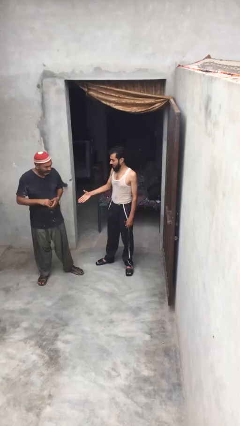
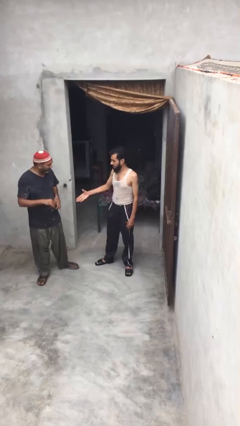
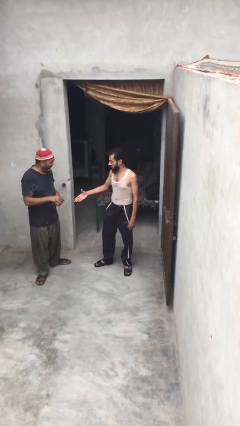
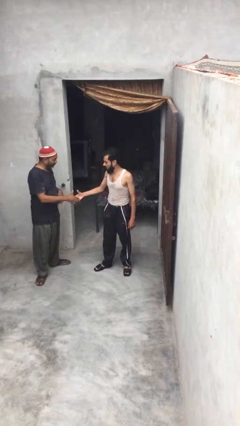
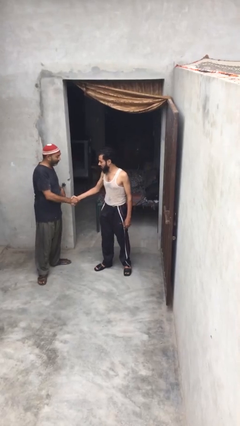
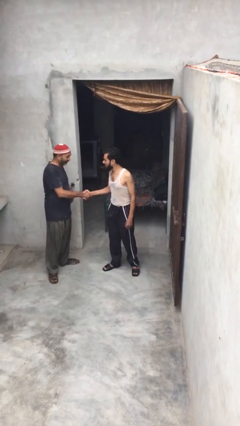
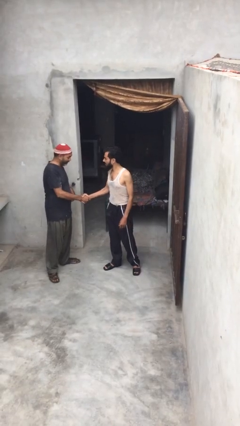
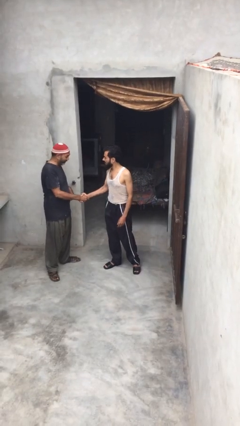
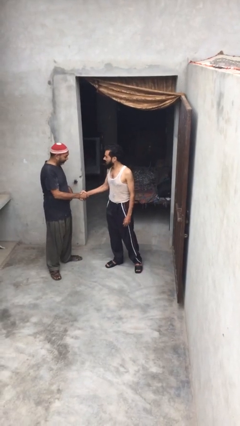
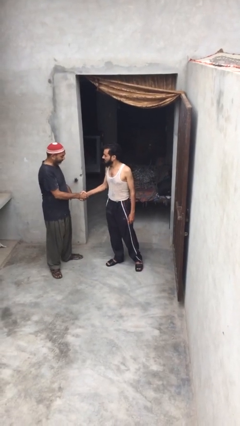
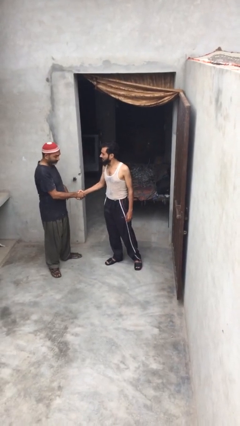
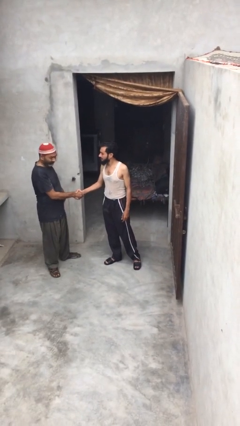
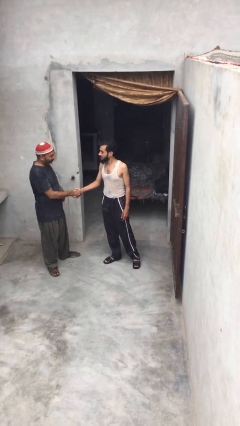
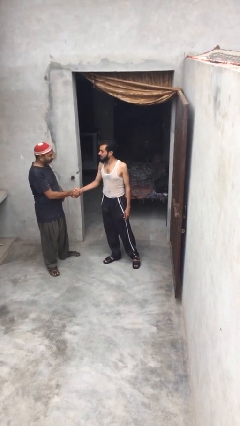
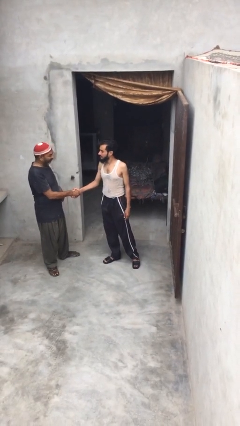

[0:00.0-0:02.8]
person shakes hand

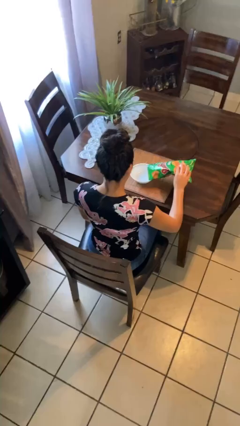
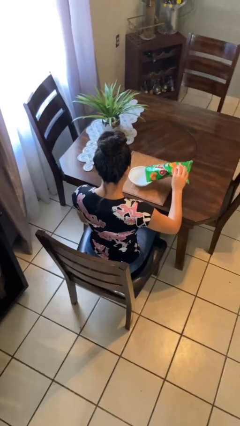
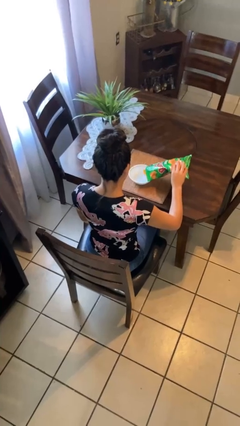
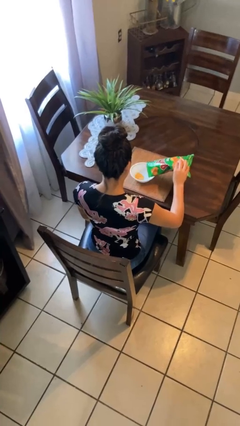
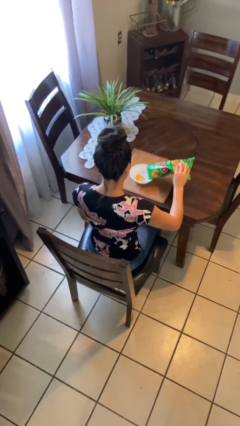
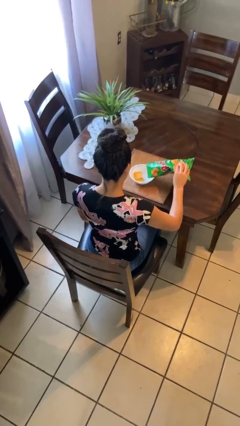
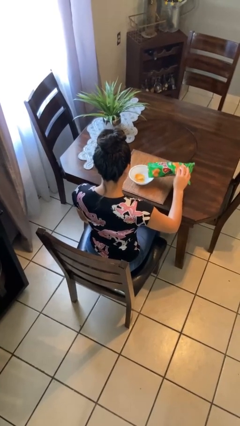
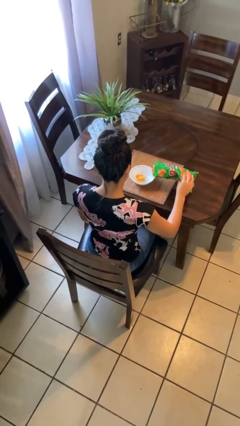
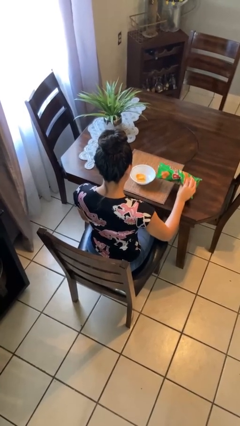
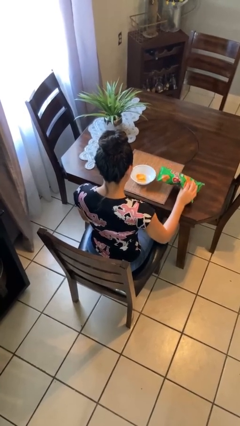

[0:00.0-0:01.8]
person pours into bowl

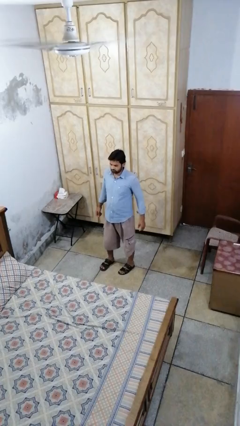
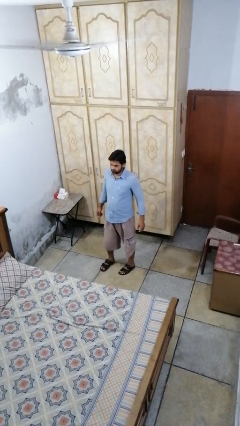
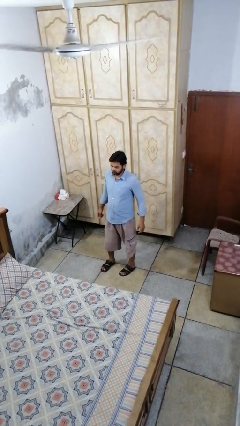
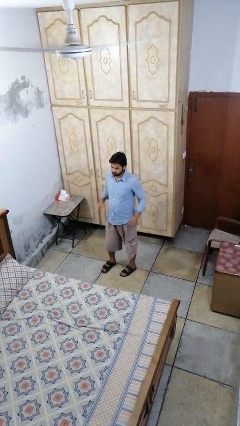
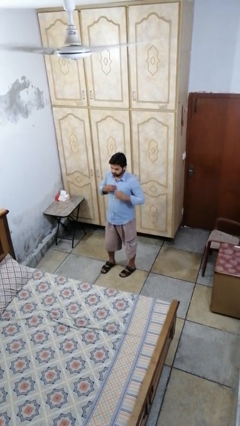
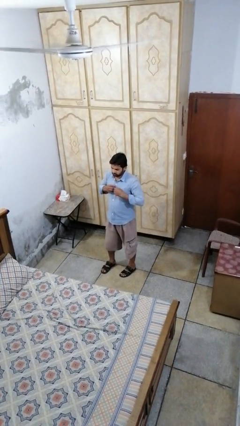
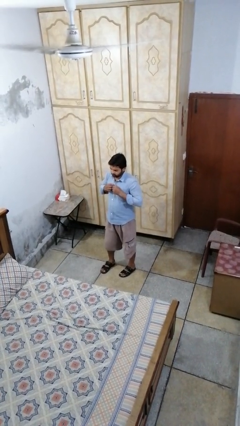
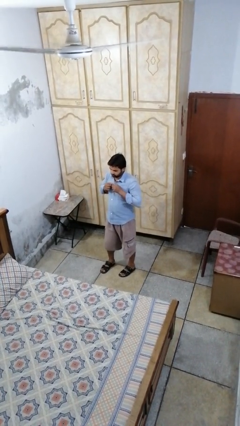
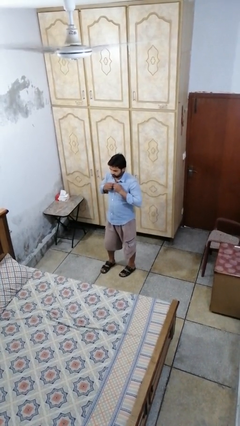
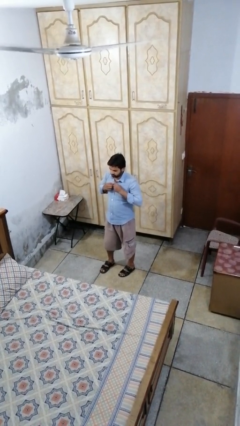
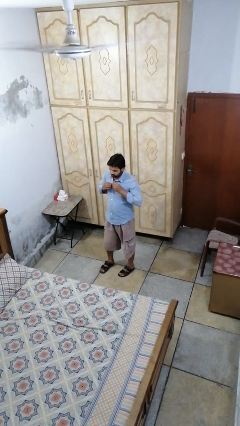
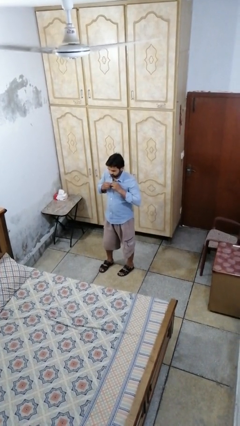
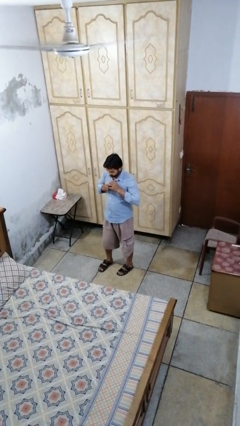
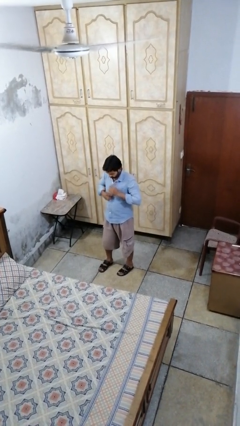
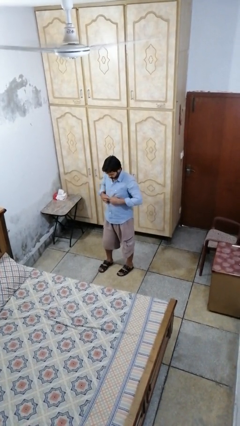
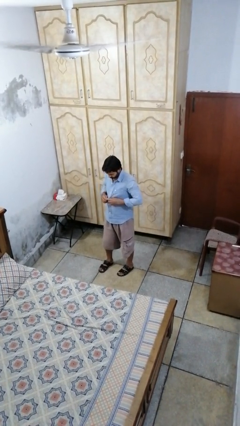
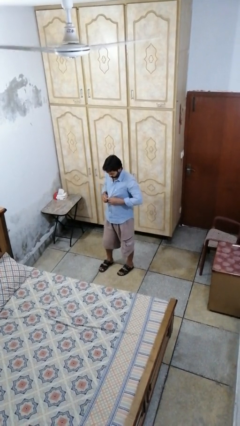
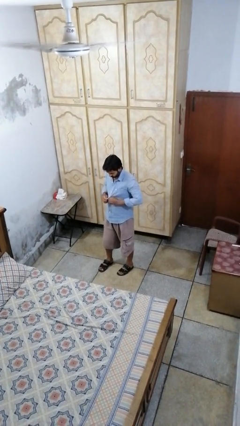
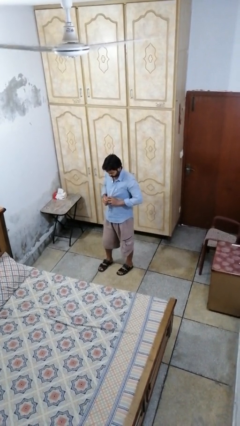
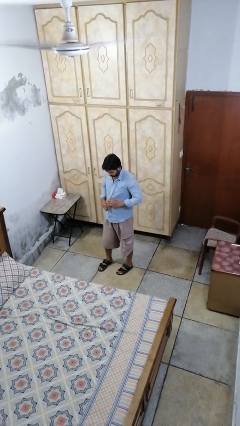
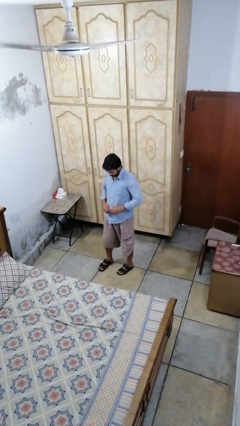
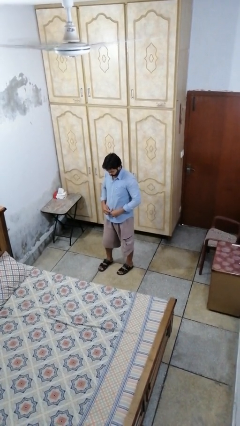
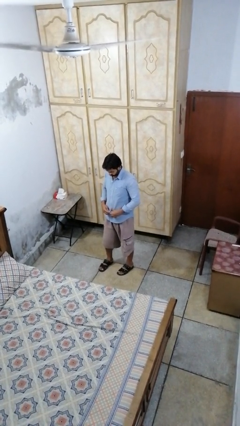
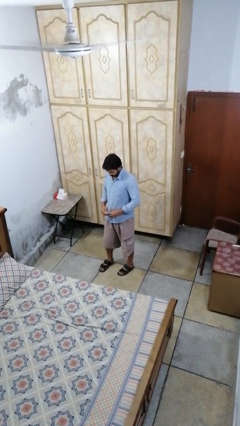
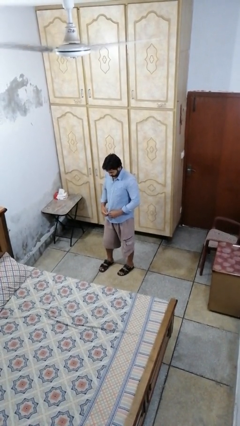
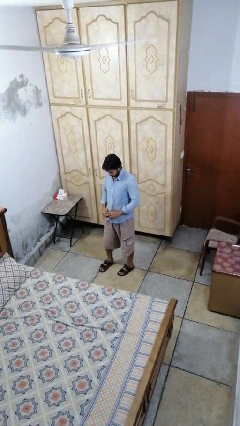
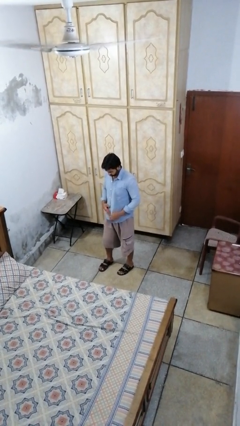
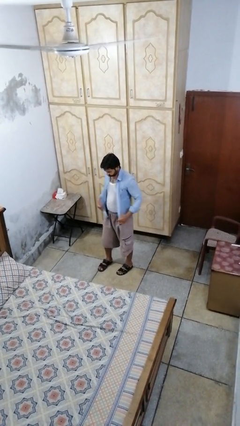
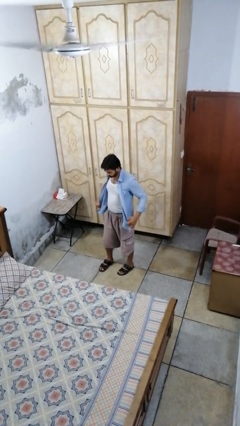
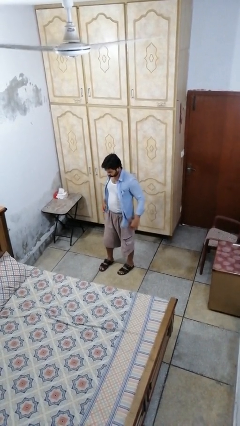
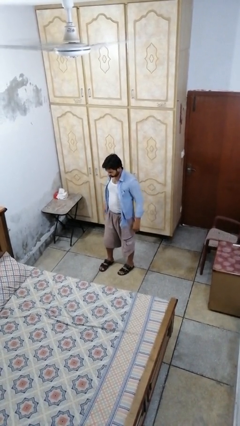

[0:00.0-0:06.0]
person unbuttons shirt

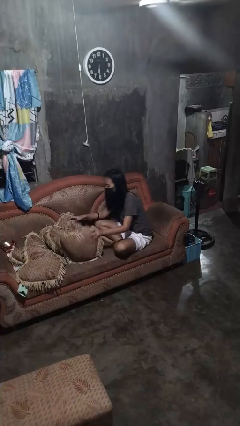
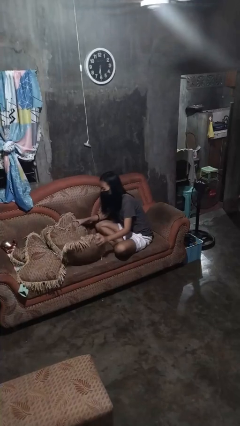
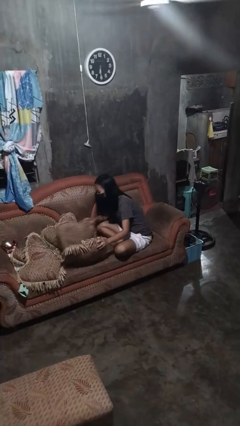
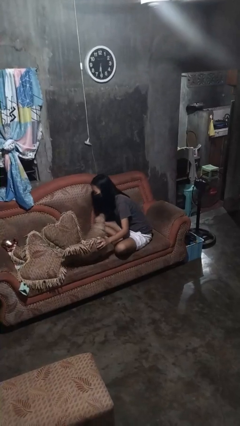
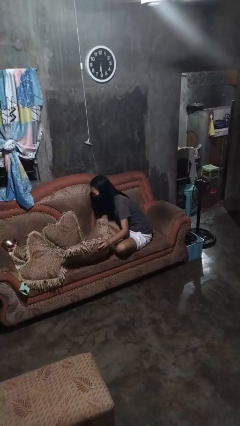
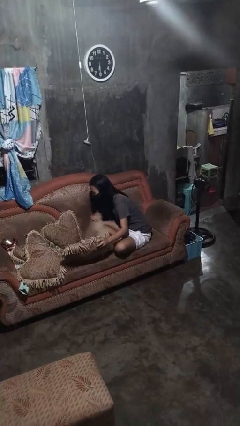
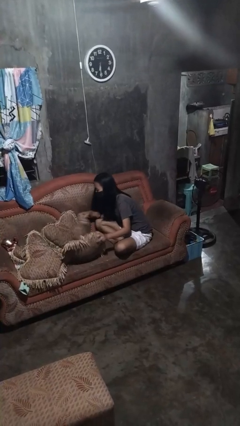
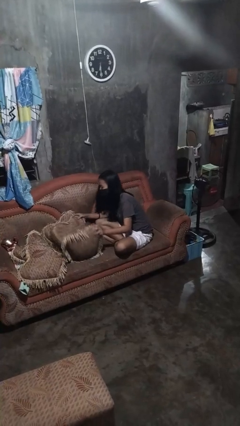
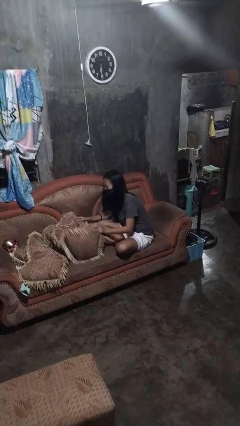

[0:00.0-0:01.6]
person searches in couch

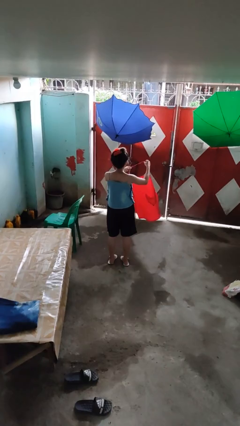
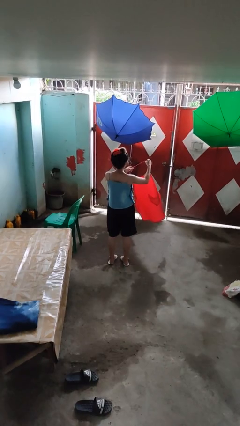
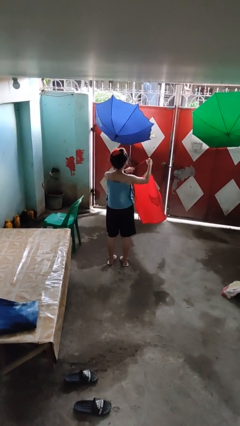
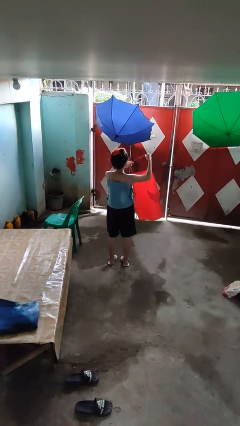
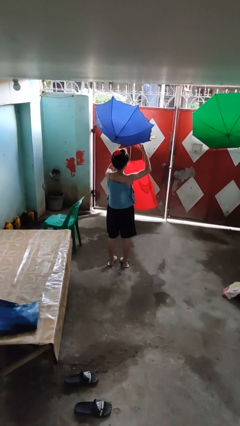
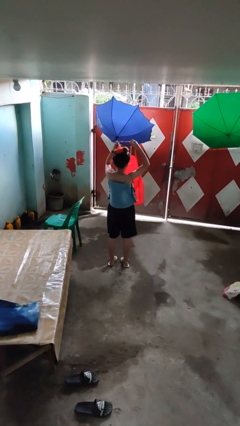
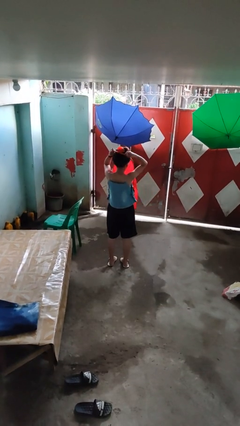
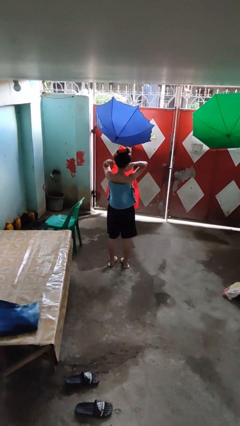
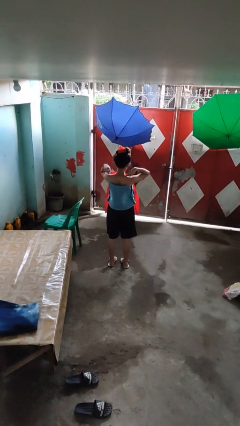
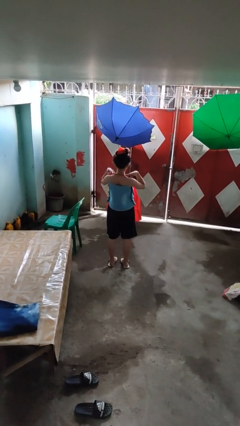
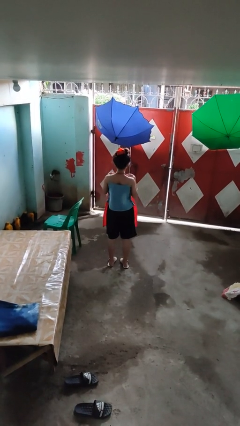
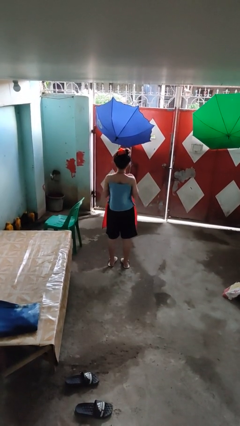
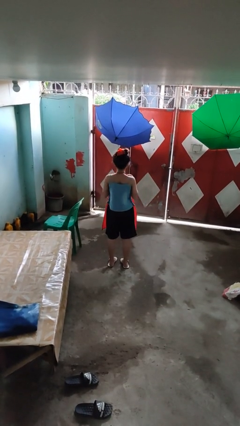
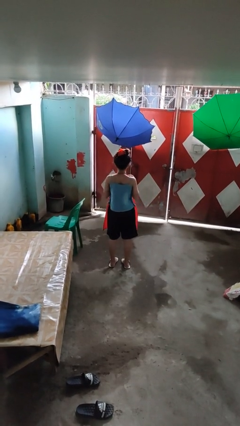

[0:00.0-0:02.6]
person puts on apron

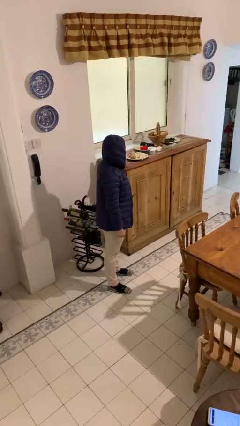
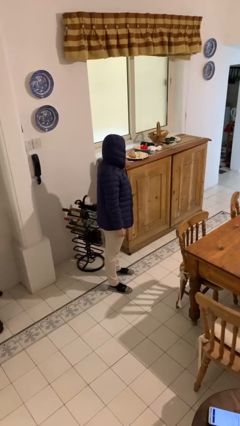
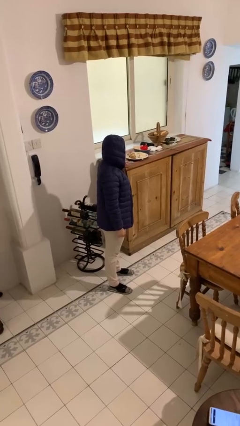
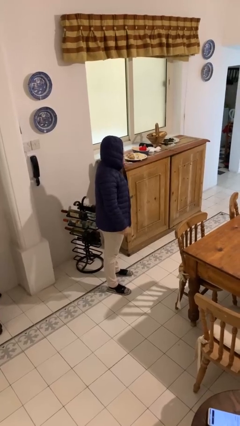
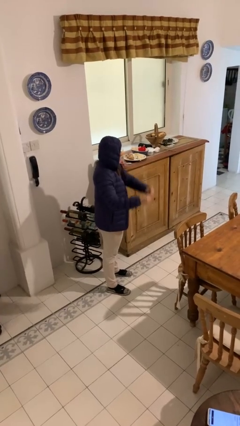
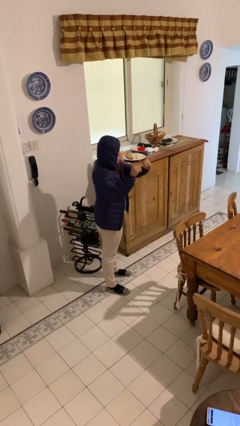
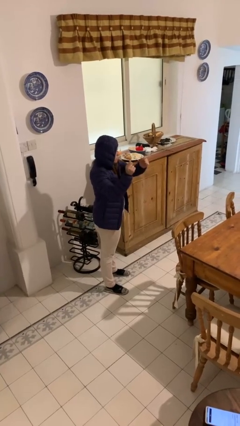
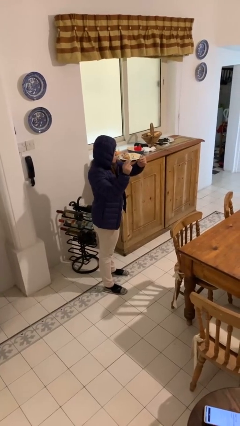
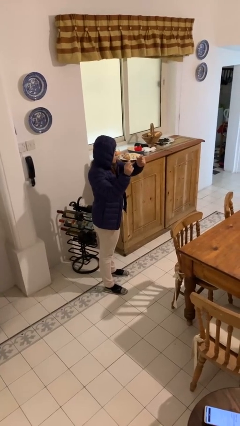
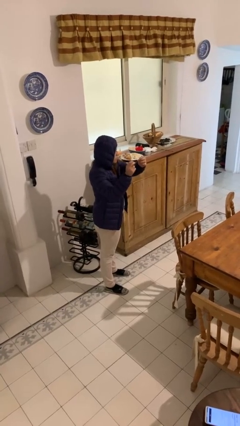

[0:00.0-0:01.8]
person snaps fingers

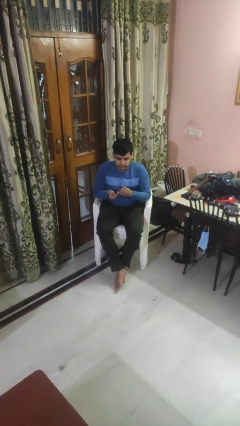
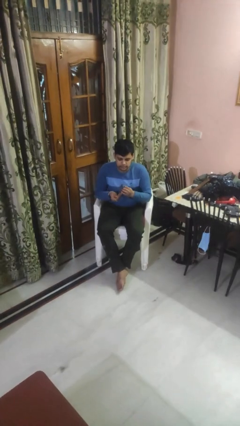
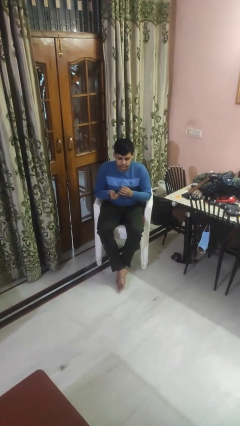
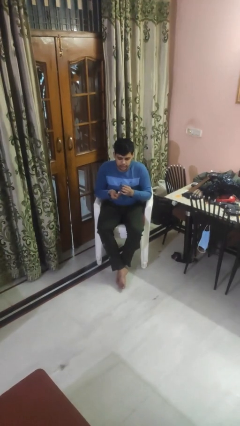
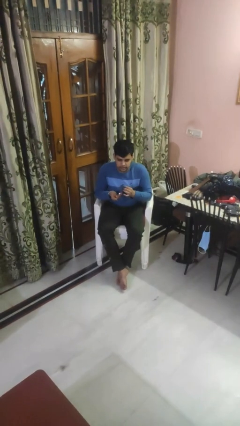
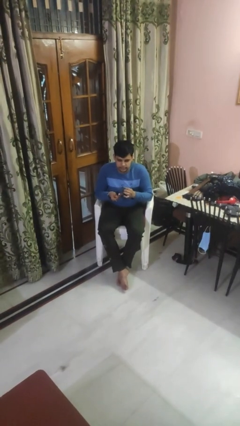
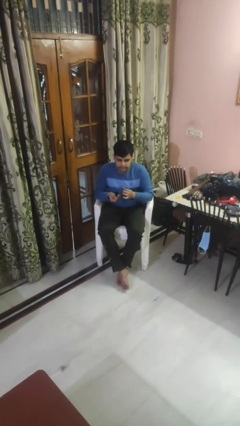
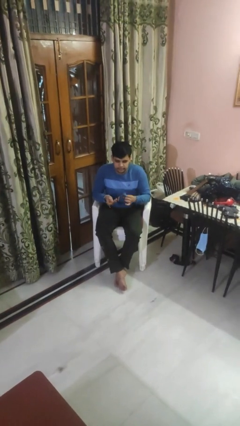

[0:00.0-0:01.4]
person cleans eyeglasses
